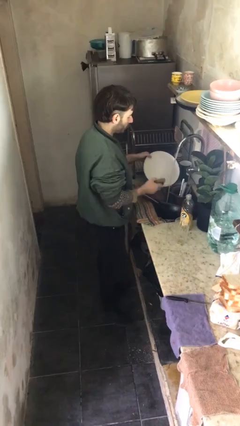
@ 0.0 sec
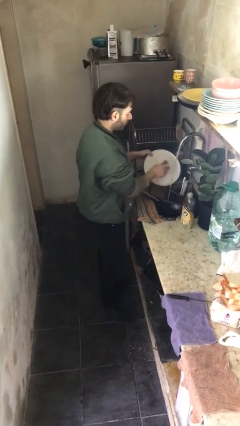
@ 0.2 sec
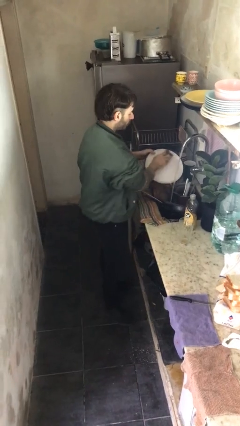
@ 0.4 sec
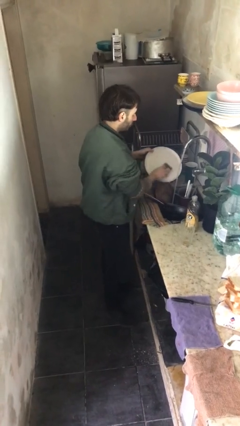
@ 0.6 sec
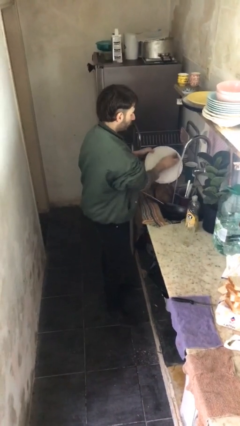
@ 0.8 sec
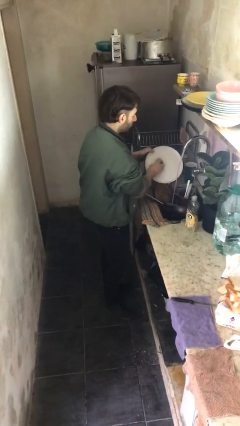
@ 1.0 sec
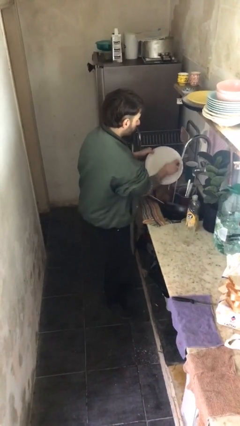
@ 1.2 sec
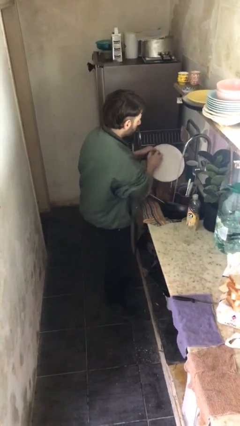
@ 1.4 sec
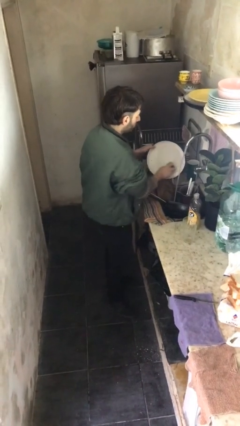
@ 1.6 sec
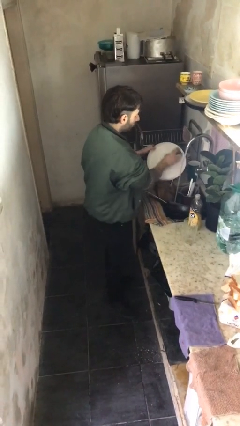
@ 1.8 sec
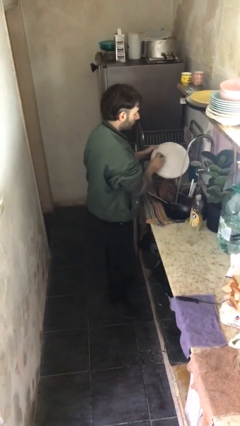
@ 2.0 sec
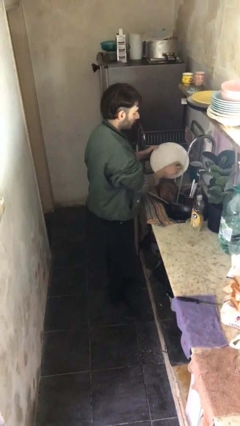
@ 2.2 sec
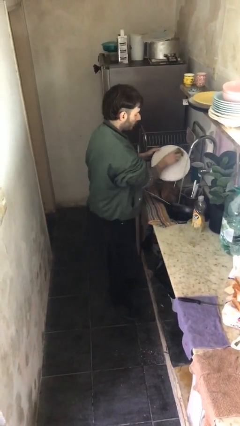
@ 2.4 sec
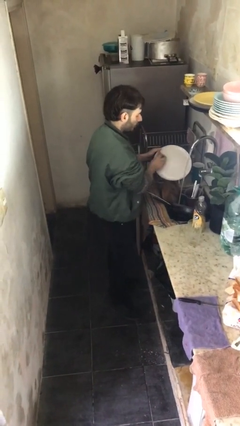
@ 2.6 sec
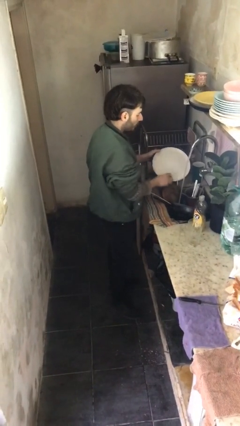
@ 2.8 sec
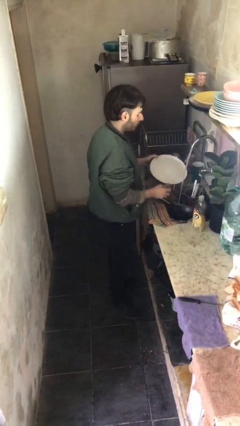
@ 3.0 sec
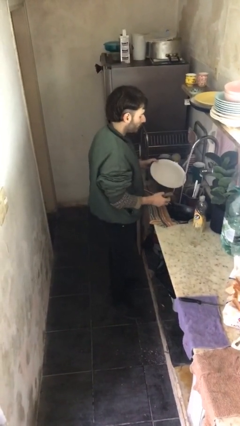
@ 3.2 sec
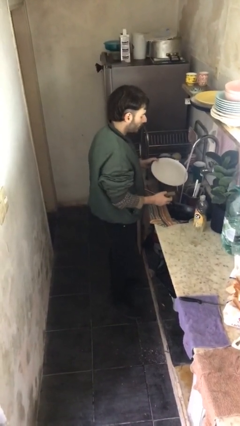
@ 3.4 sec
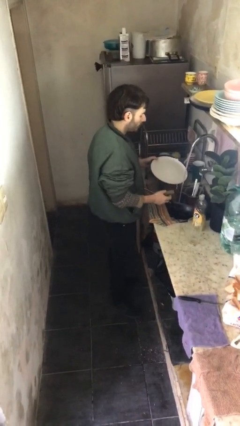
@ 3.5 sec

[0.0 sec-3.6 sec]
person washes dish

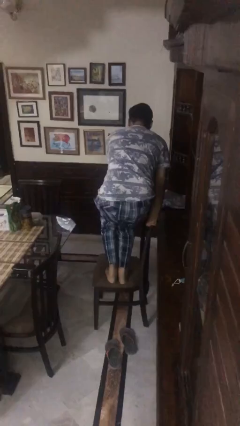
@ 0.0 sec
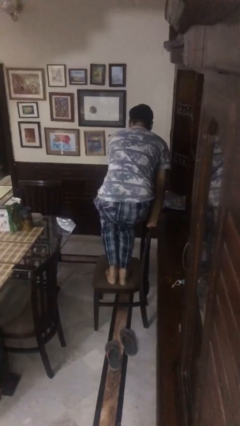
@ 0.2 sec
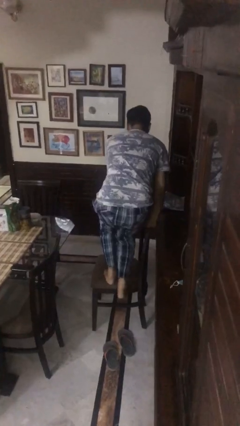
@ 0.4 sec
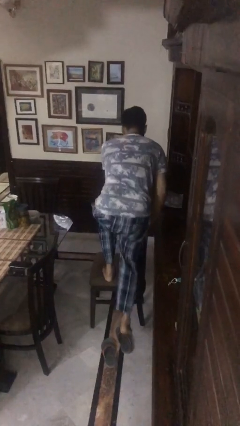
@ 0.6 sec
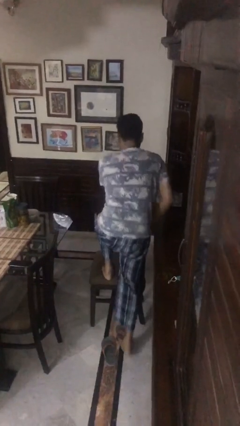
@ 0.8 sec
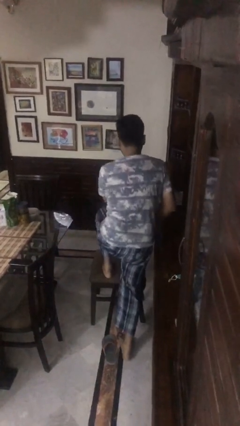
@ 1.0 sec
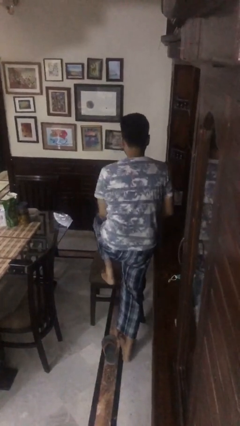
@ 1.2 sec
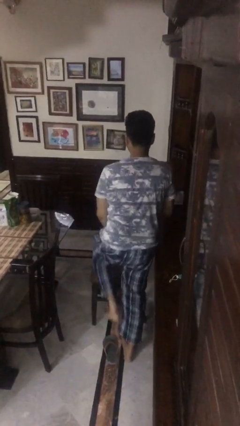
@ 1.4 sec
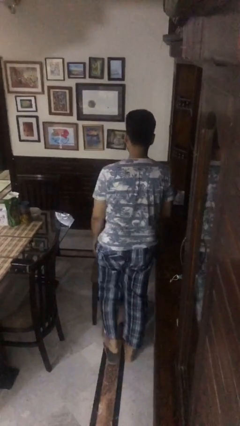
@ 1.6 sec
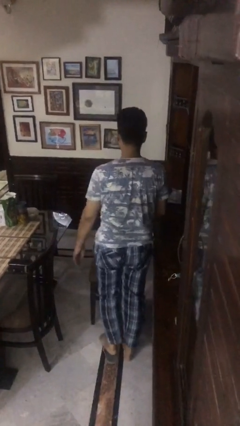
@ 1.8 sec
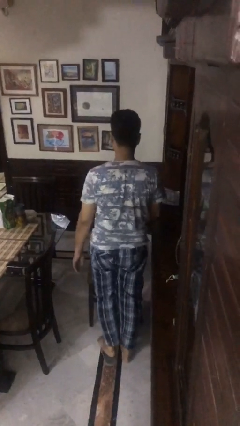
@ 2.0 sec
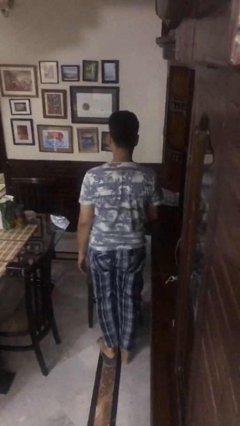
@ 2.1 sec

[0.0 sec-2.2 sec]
person climbs off chair

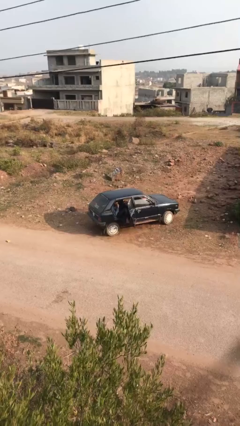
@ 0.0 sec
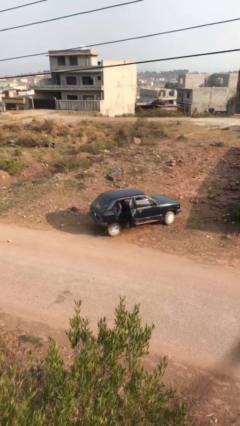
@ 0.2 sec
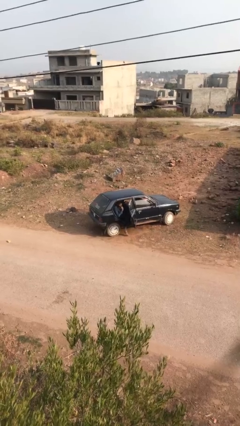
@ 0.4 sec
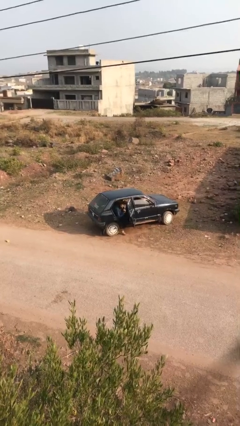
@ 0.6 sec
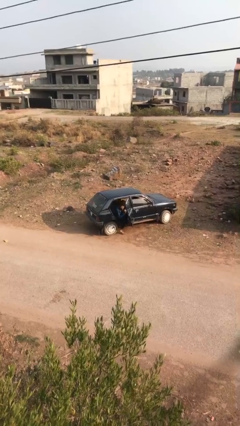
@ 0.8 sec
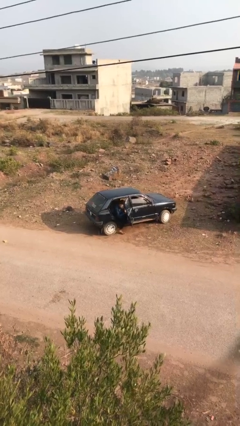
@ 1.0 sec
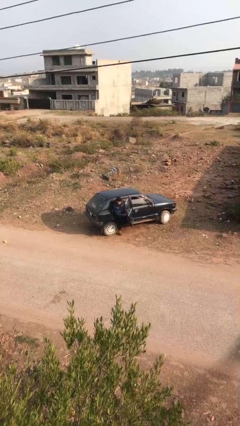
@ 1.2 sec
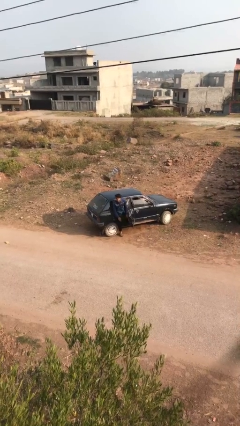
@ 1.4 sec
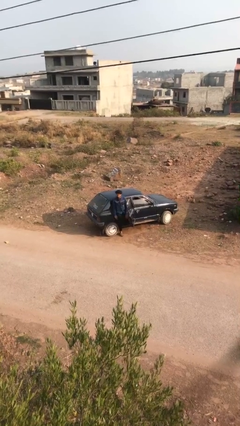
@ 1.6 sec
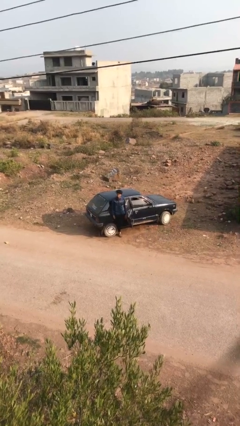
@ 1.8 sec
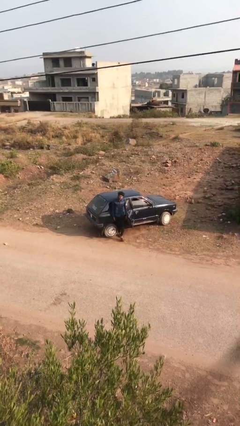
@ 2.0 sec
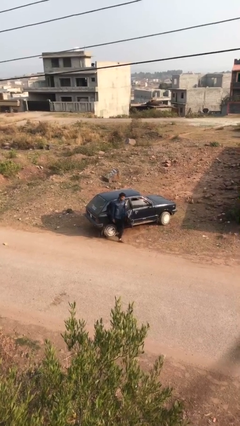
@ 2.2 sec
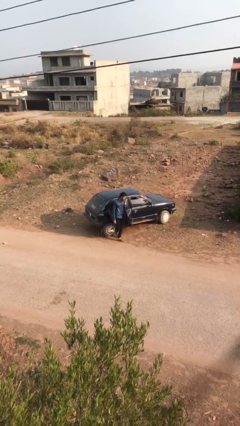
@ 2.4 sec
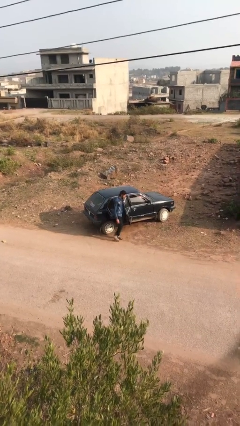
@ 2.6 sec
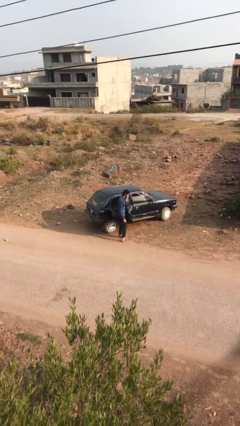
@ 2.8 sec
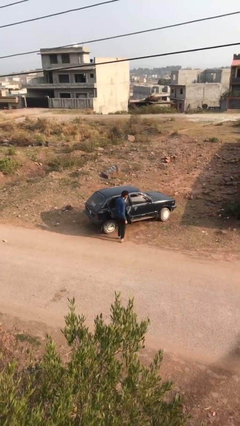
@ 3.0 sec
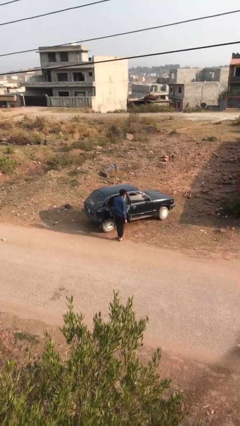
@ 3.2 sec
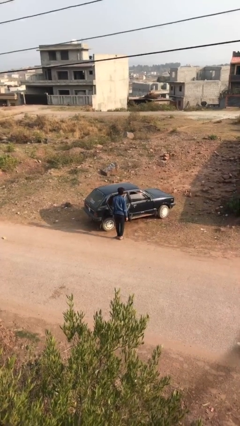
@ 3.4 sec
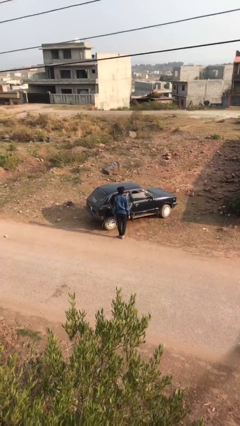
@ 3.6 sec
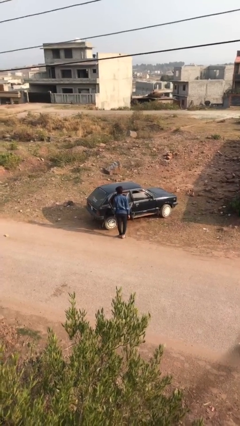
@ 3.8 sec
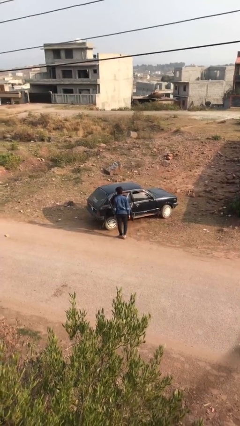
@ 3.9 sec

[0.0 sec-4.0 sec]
person exits car

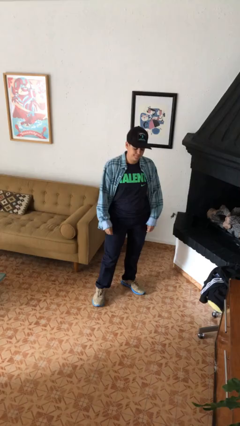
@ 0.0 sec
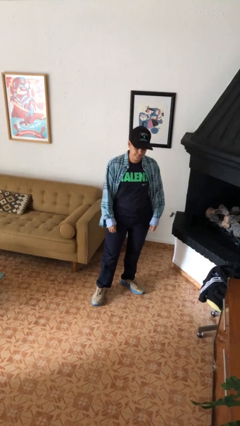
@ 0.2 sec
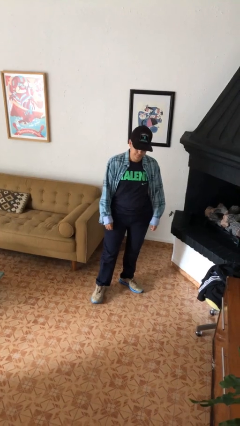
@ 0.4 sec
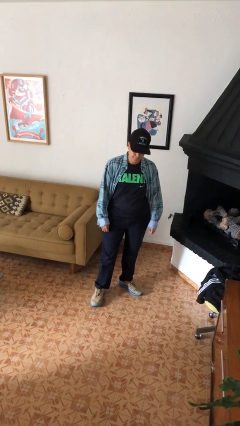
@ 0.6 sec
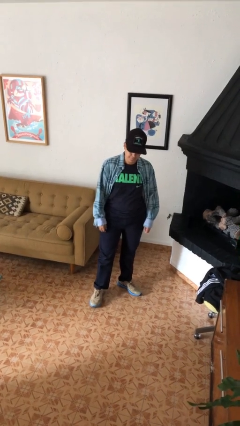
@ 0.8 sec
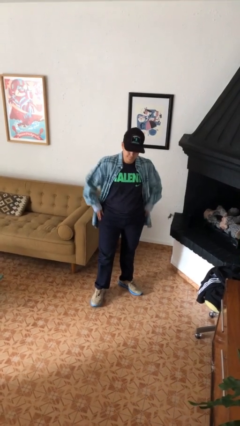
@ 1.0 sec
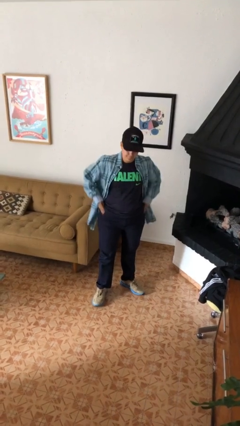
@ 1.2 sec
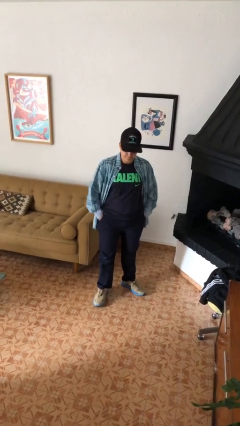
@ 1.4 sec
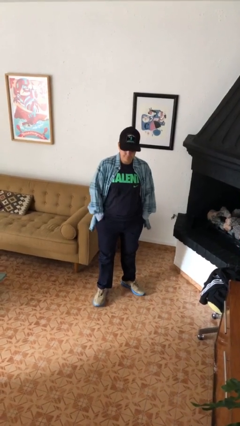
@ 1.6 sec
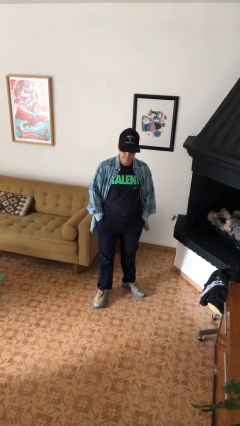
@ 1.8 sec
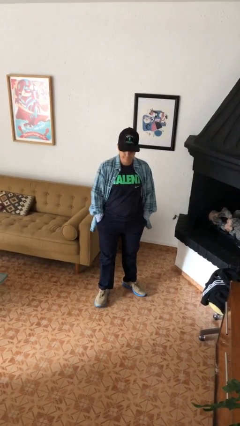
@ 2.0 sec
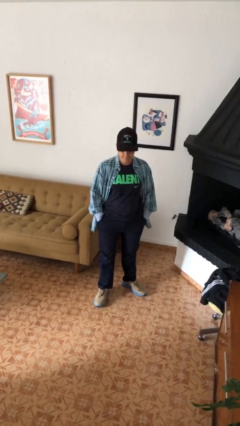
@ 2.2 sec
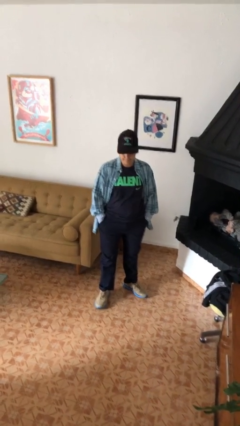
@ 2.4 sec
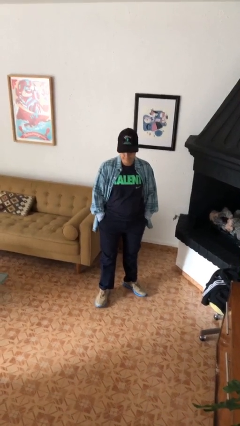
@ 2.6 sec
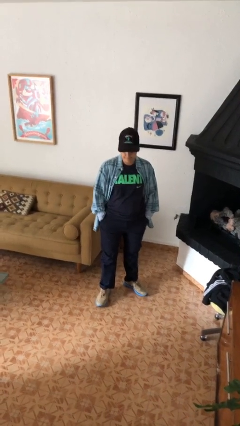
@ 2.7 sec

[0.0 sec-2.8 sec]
person puts hands in back pockets

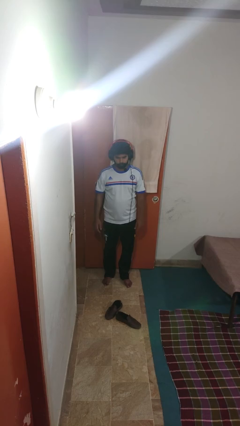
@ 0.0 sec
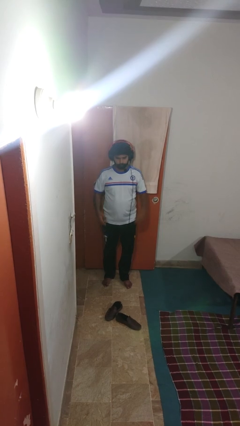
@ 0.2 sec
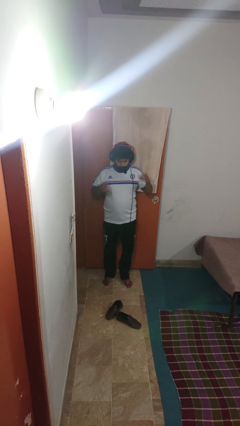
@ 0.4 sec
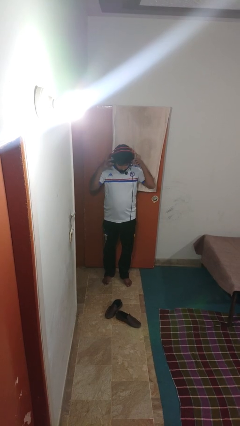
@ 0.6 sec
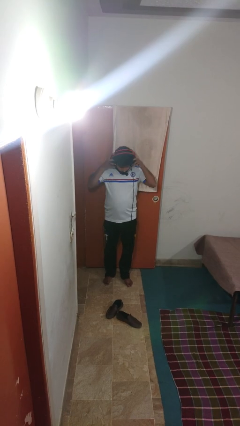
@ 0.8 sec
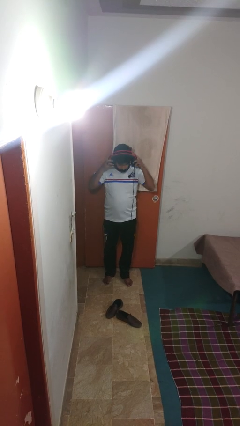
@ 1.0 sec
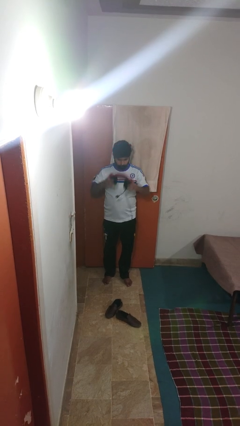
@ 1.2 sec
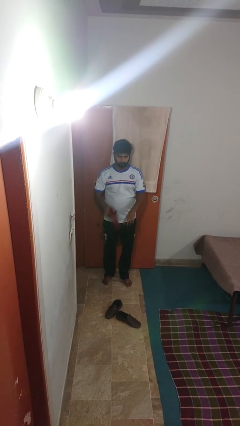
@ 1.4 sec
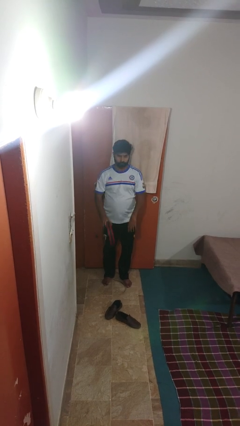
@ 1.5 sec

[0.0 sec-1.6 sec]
person takes off headphones

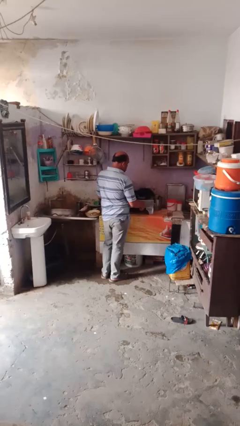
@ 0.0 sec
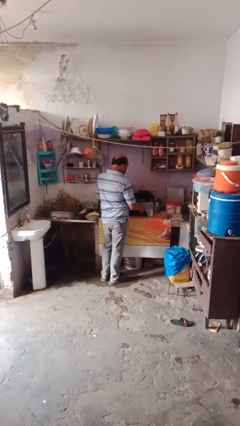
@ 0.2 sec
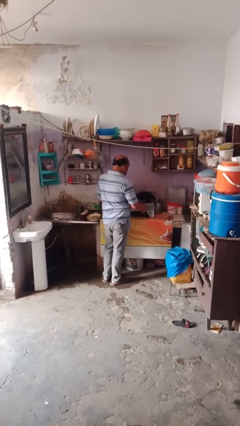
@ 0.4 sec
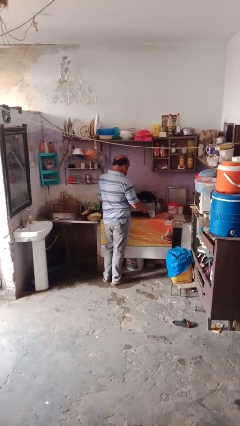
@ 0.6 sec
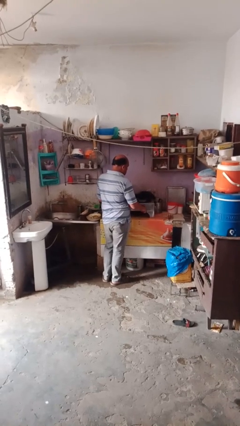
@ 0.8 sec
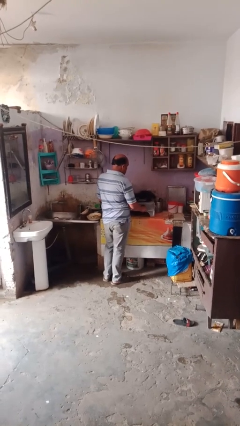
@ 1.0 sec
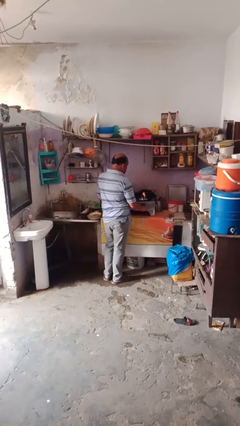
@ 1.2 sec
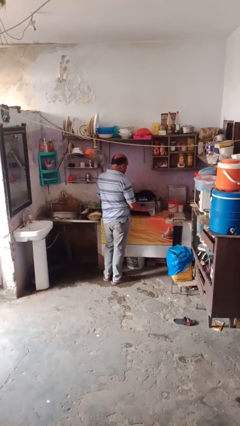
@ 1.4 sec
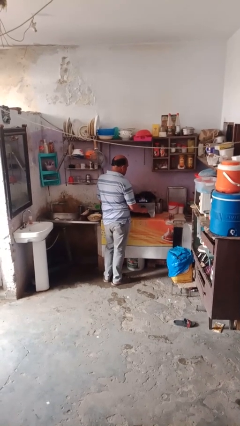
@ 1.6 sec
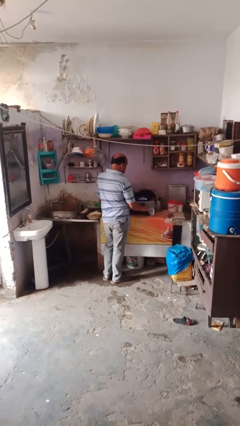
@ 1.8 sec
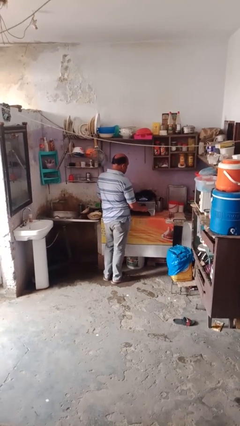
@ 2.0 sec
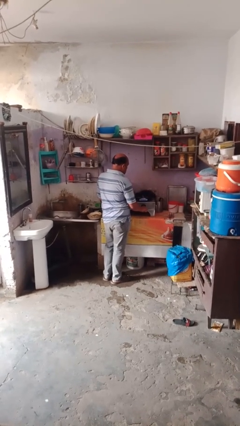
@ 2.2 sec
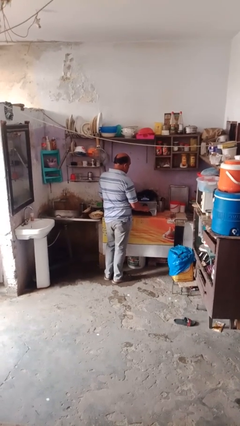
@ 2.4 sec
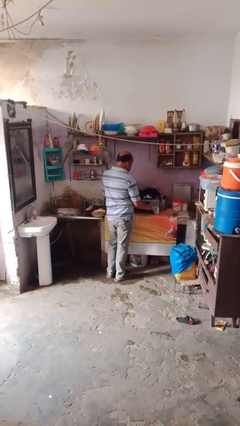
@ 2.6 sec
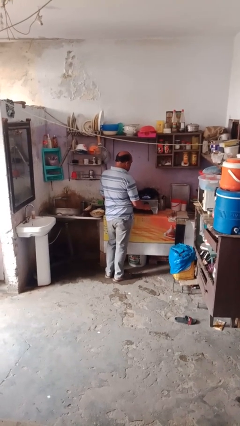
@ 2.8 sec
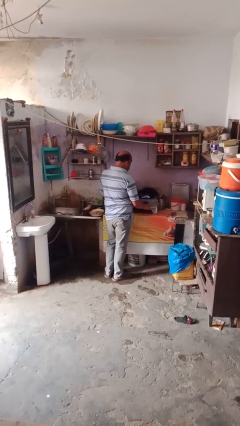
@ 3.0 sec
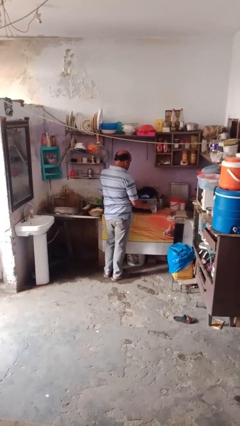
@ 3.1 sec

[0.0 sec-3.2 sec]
person turns on stovetop
